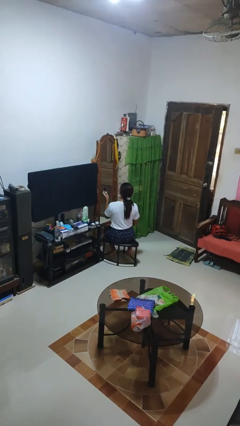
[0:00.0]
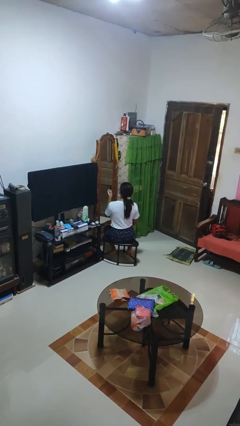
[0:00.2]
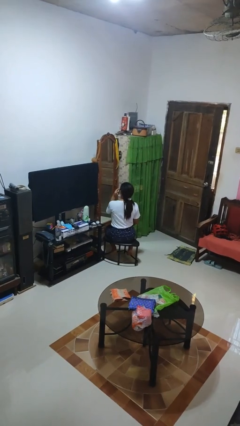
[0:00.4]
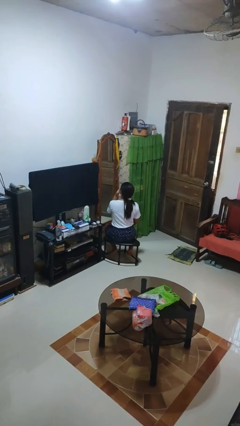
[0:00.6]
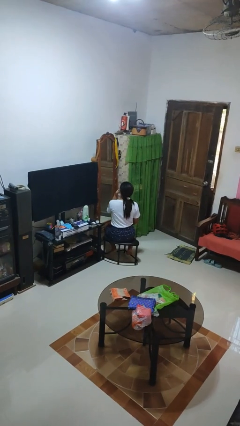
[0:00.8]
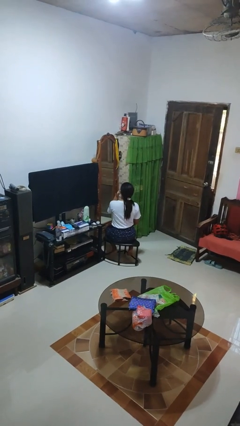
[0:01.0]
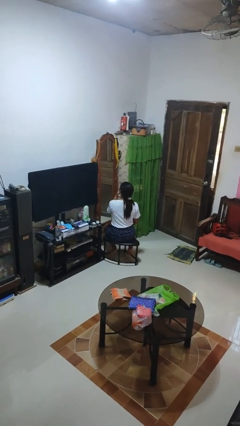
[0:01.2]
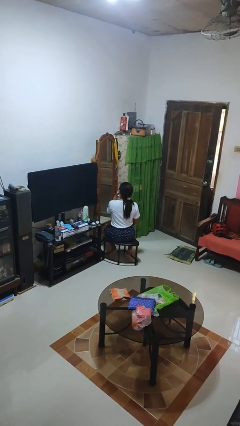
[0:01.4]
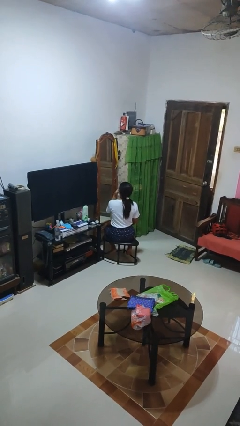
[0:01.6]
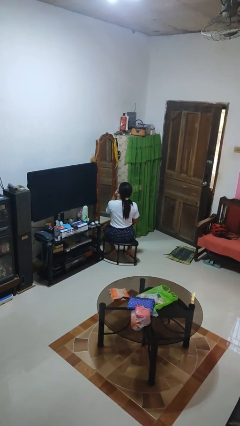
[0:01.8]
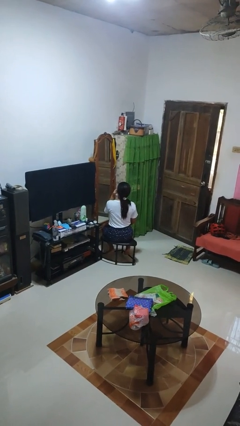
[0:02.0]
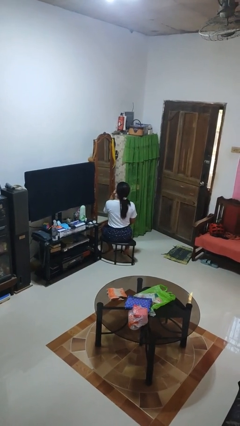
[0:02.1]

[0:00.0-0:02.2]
person applies lip makeup

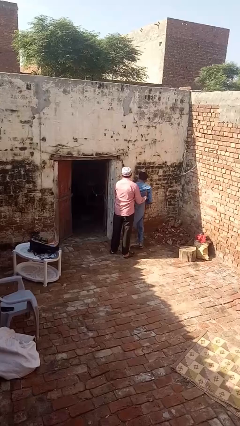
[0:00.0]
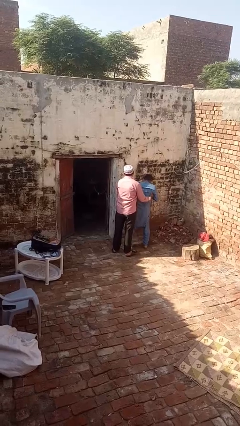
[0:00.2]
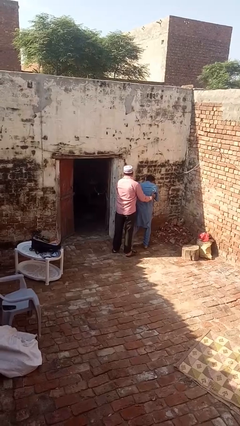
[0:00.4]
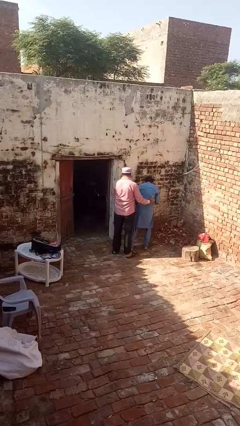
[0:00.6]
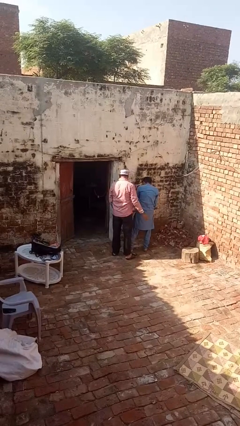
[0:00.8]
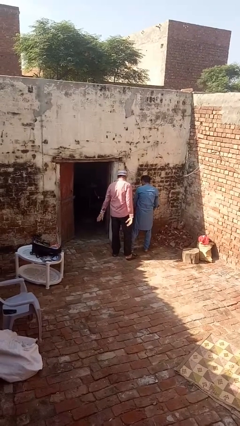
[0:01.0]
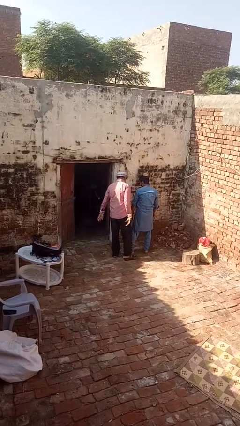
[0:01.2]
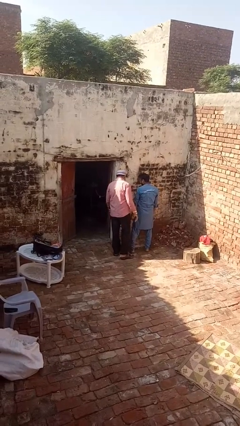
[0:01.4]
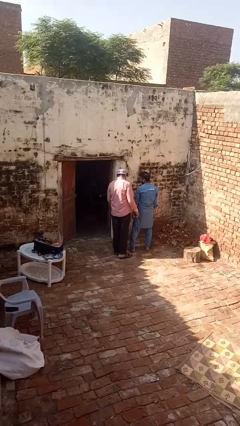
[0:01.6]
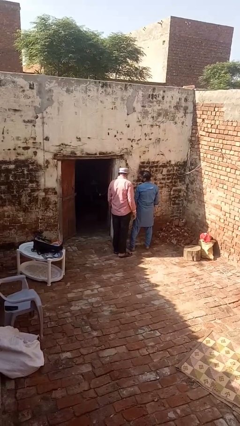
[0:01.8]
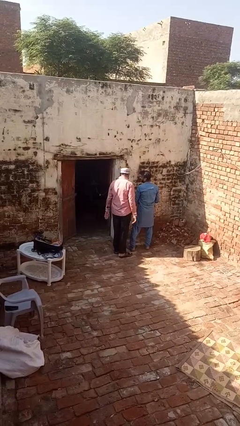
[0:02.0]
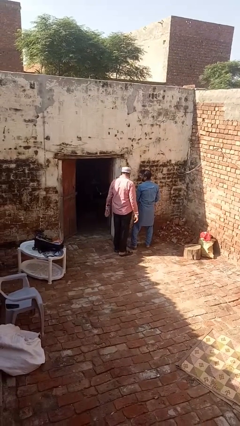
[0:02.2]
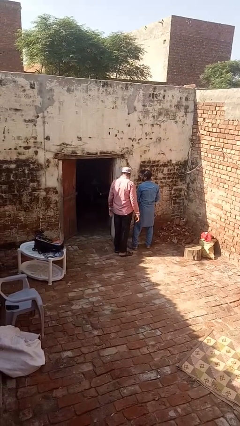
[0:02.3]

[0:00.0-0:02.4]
person puts down person

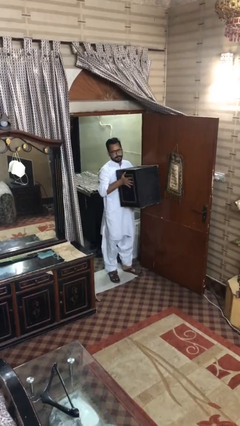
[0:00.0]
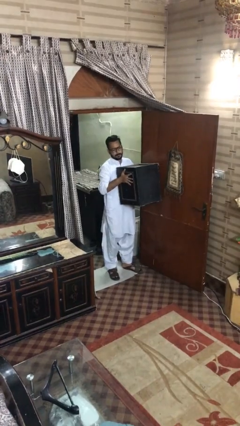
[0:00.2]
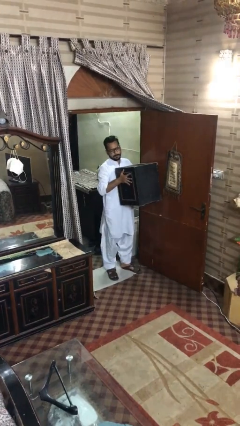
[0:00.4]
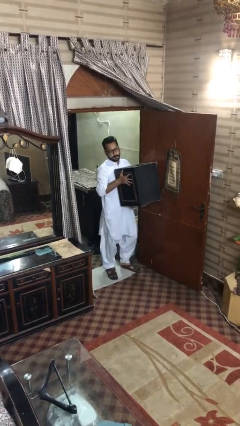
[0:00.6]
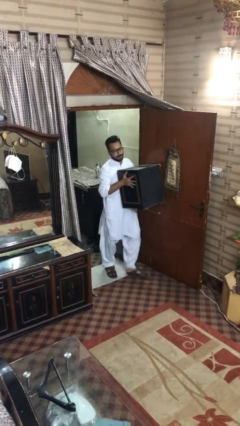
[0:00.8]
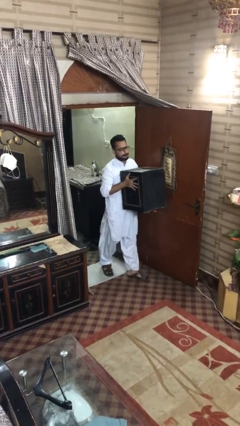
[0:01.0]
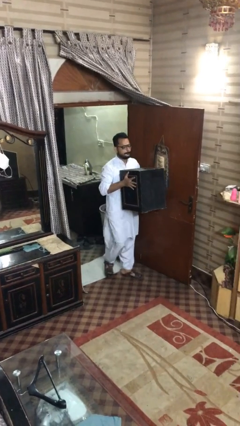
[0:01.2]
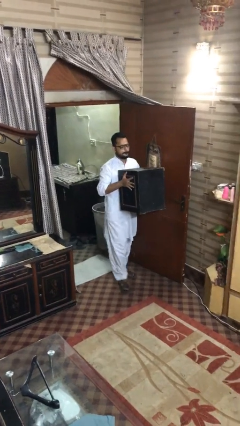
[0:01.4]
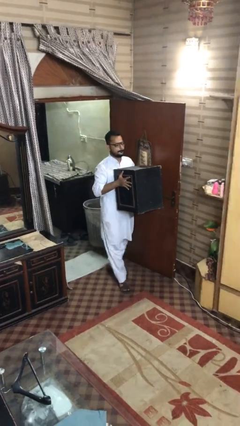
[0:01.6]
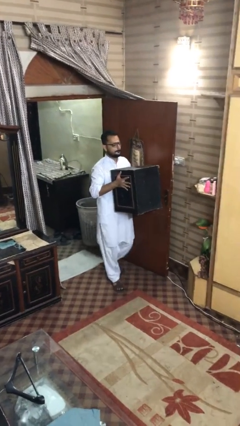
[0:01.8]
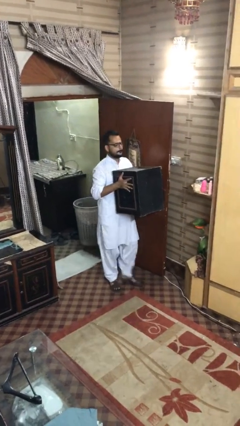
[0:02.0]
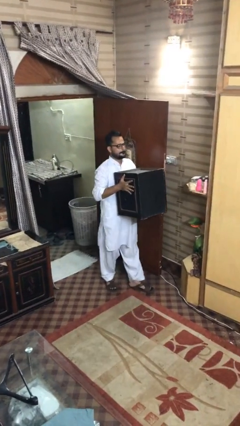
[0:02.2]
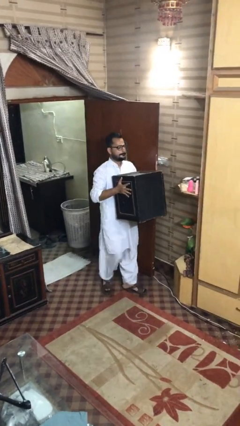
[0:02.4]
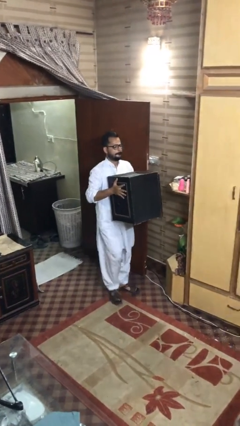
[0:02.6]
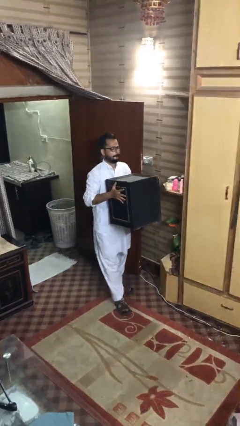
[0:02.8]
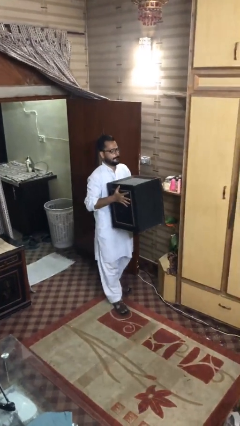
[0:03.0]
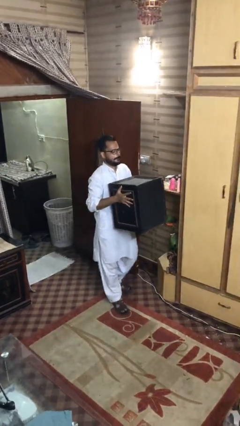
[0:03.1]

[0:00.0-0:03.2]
person carries heavy object

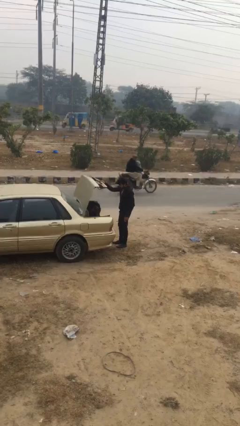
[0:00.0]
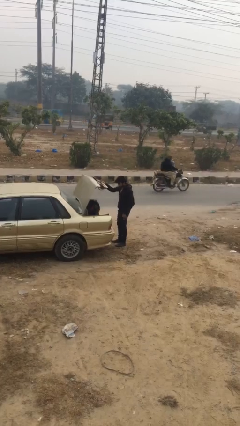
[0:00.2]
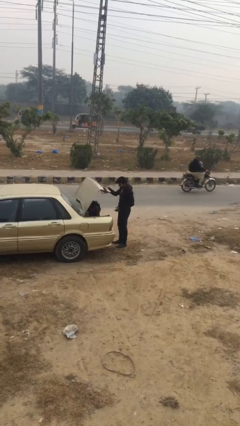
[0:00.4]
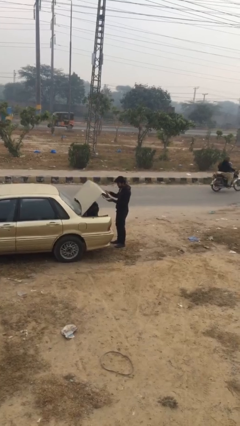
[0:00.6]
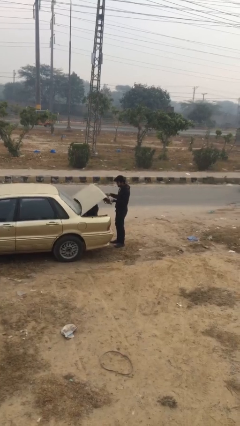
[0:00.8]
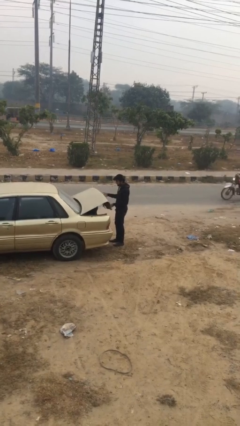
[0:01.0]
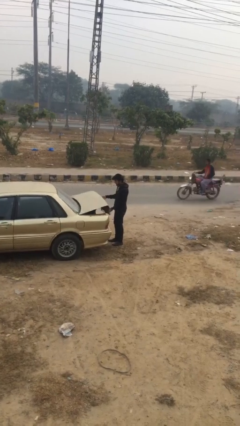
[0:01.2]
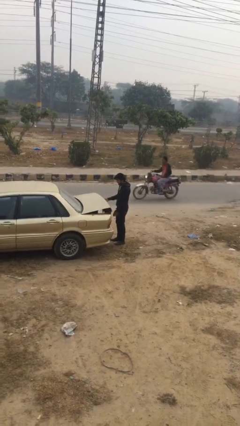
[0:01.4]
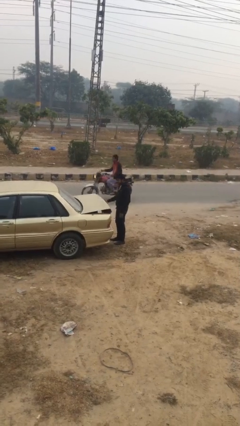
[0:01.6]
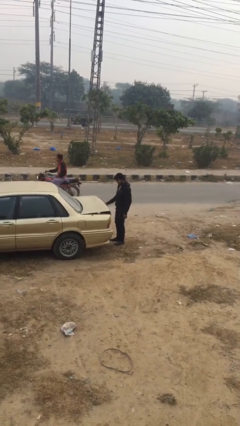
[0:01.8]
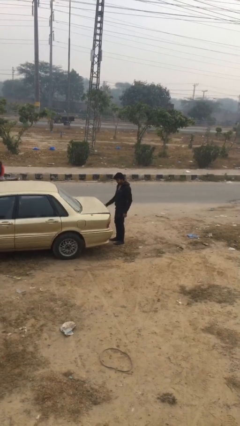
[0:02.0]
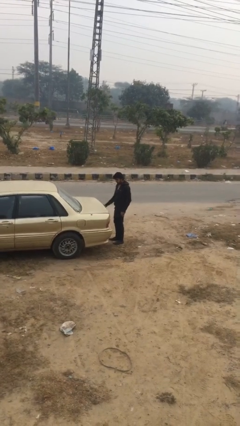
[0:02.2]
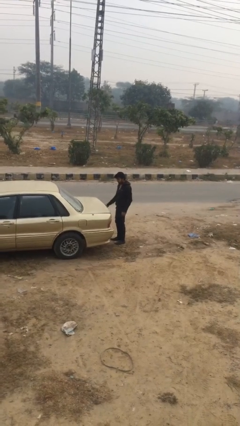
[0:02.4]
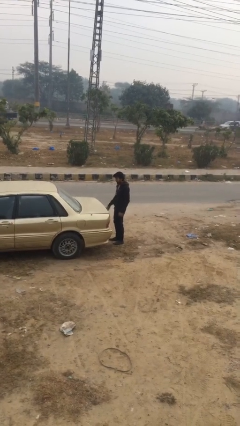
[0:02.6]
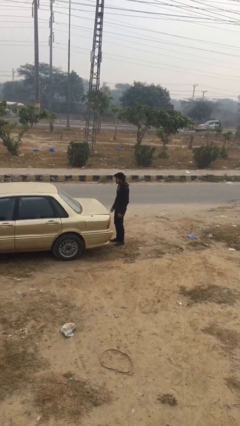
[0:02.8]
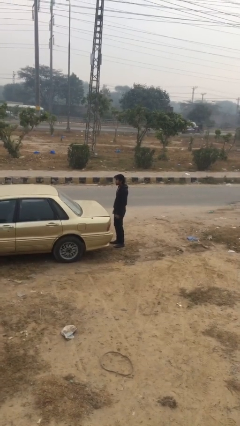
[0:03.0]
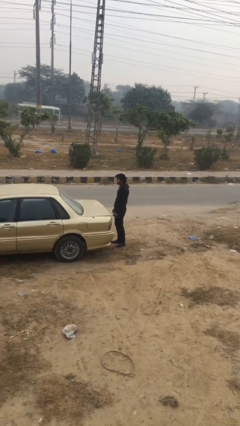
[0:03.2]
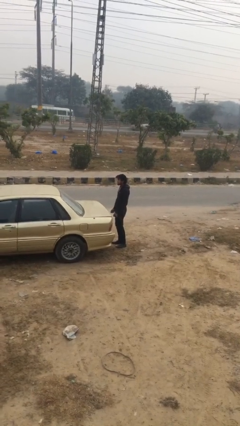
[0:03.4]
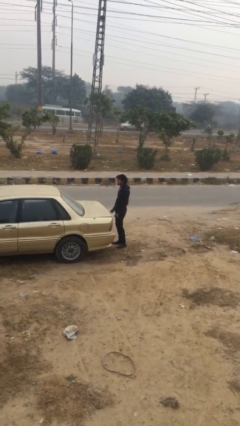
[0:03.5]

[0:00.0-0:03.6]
person closes car trunk

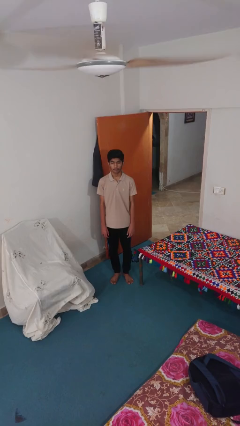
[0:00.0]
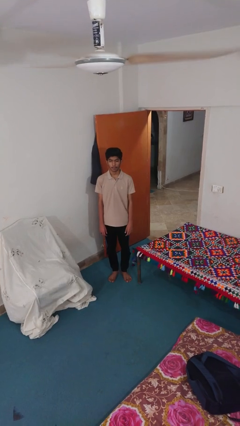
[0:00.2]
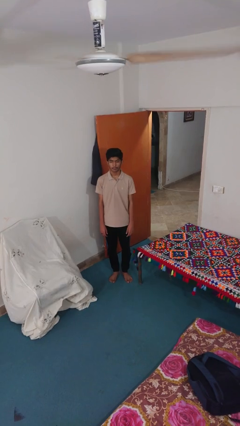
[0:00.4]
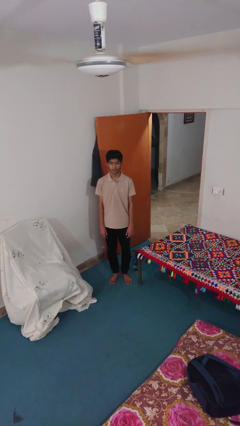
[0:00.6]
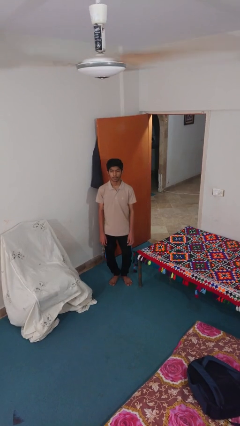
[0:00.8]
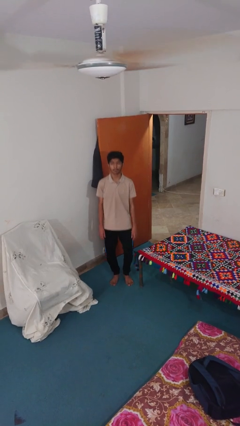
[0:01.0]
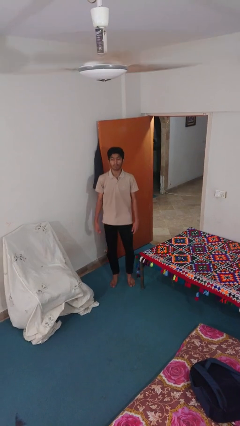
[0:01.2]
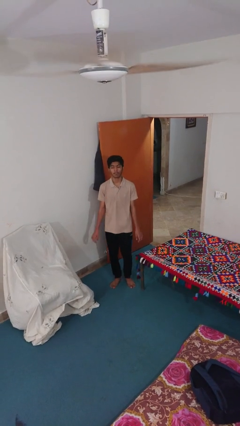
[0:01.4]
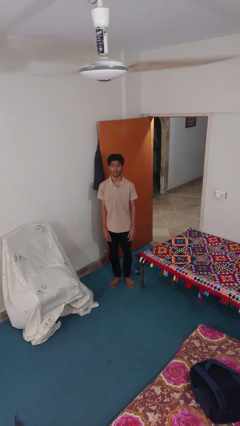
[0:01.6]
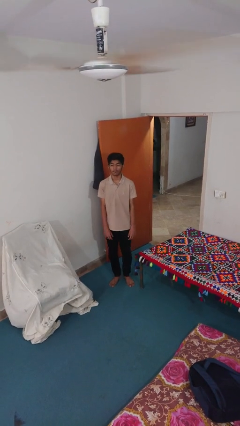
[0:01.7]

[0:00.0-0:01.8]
person jumps

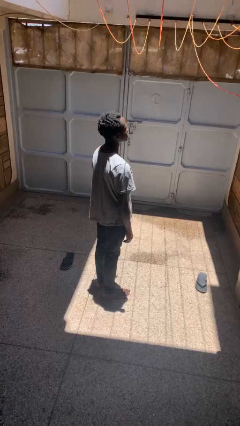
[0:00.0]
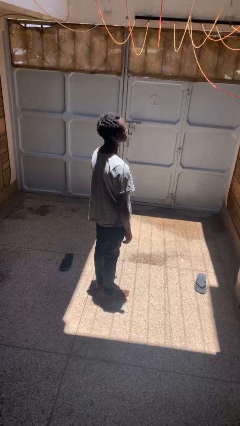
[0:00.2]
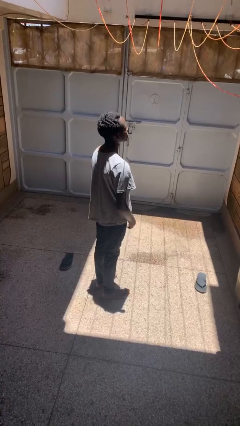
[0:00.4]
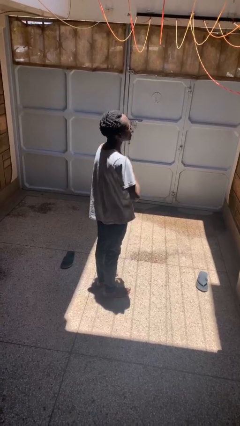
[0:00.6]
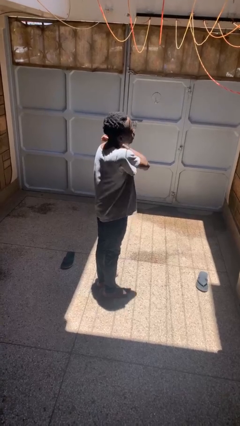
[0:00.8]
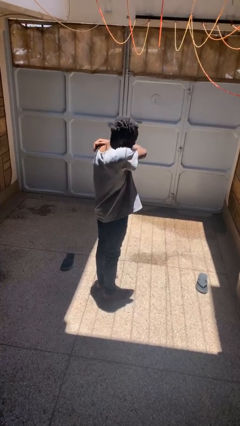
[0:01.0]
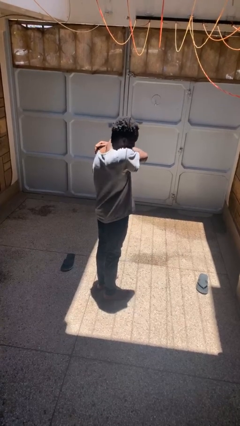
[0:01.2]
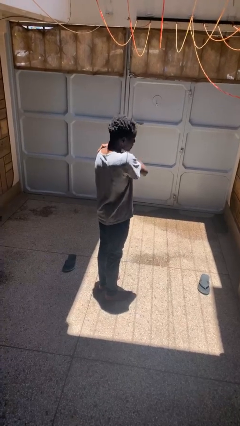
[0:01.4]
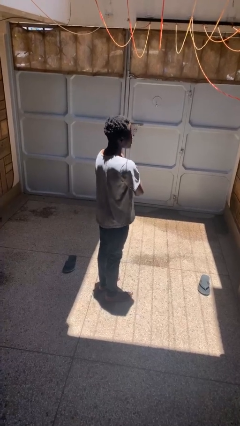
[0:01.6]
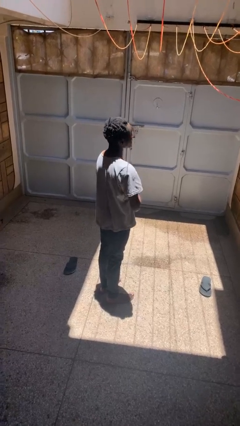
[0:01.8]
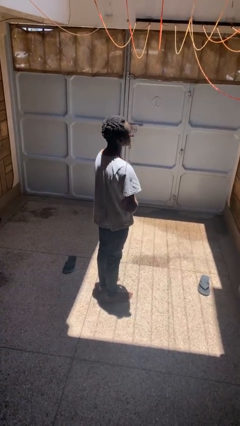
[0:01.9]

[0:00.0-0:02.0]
person sneezes into arm

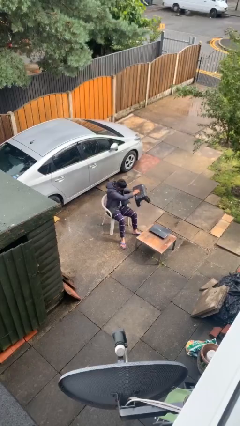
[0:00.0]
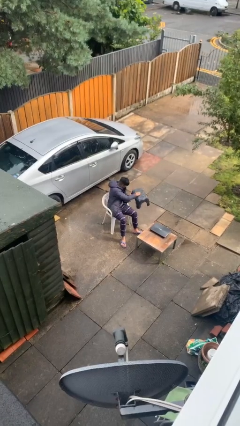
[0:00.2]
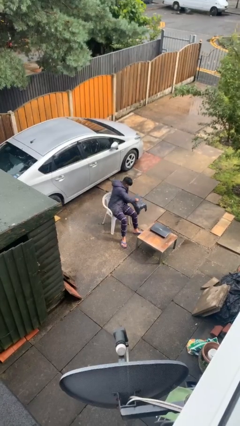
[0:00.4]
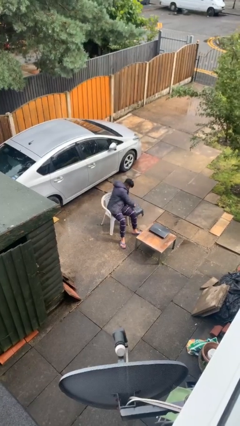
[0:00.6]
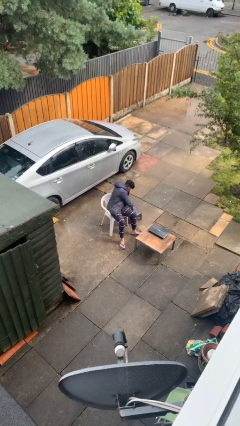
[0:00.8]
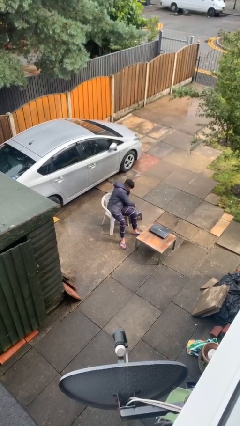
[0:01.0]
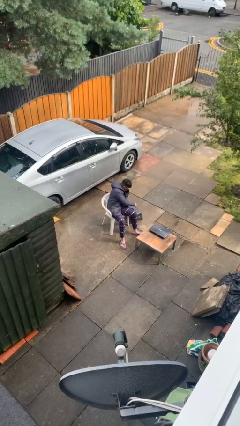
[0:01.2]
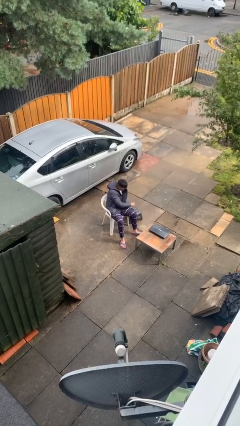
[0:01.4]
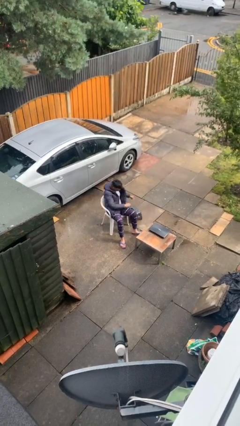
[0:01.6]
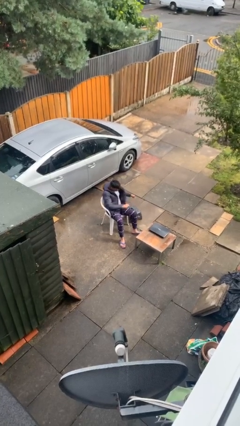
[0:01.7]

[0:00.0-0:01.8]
person puts down object on floor
